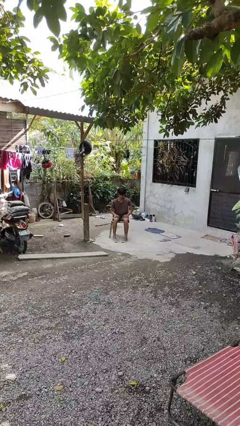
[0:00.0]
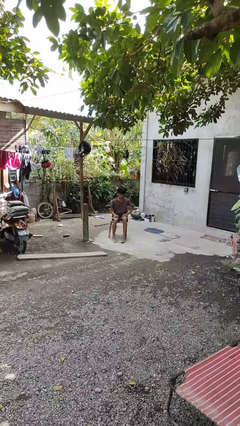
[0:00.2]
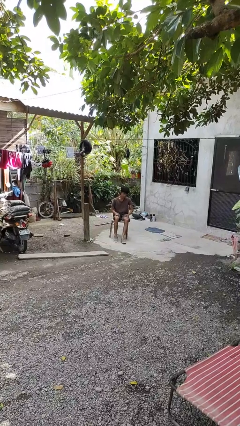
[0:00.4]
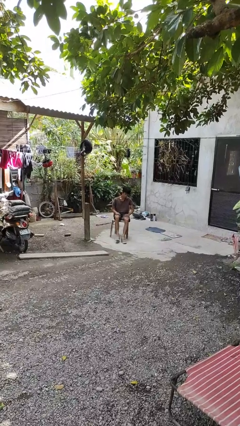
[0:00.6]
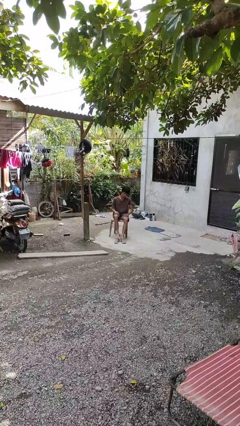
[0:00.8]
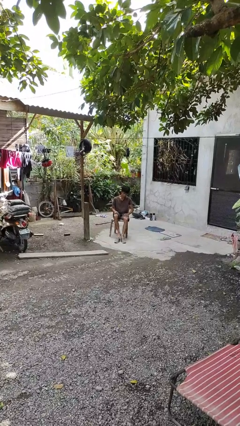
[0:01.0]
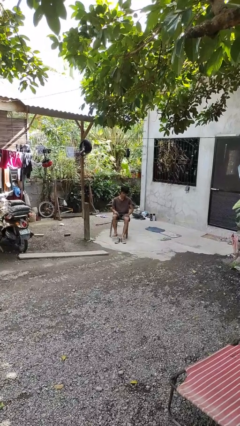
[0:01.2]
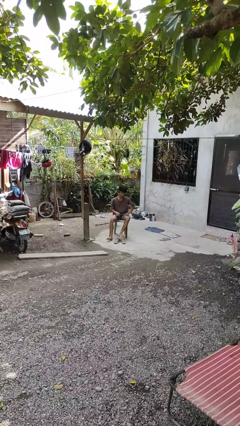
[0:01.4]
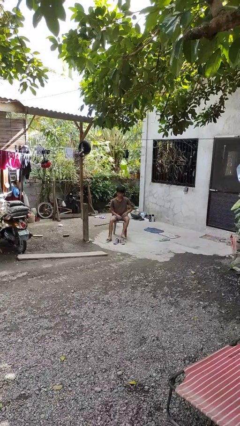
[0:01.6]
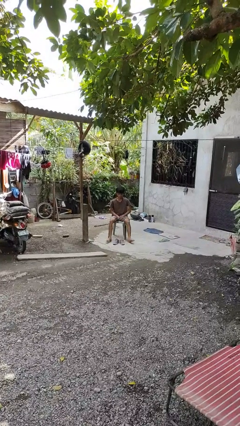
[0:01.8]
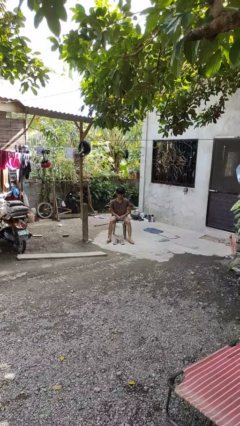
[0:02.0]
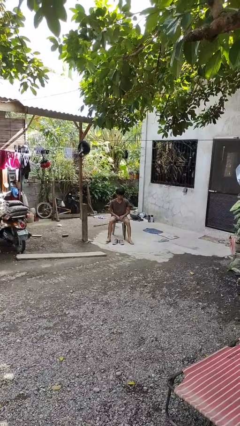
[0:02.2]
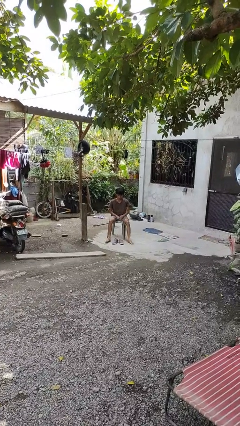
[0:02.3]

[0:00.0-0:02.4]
person takes off shoes

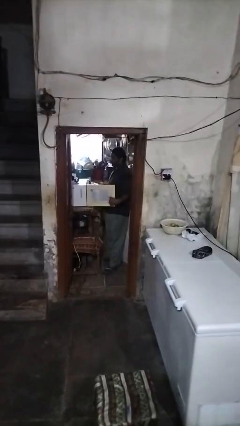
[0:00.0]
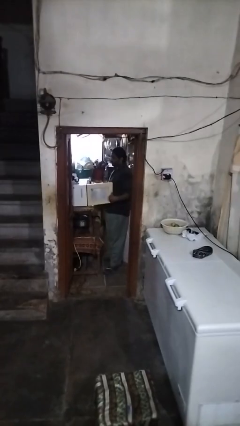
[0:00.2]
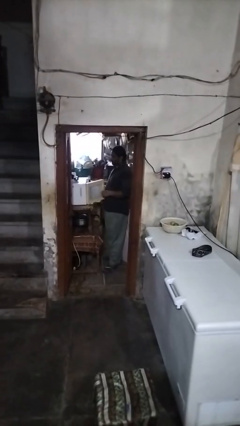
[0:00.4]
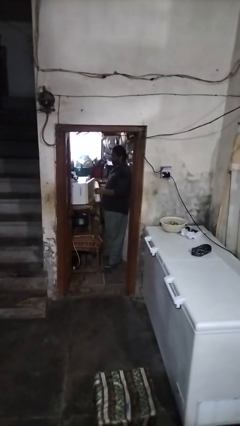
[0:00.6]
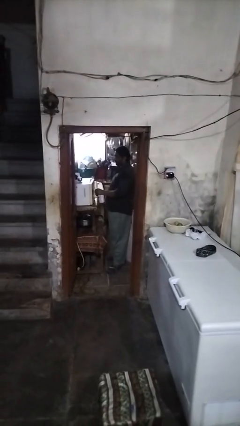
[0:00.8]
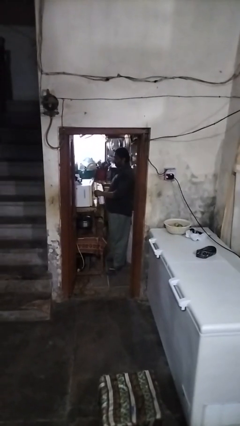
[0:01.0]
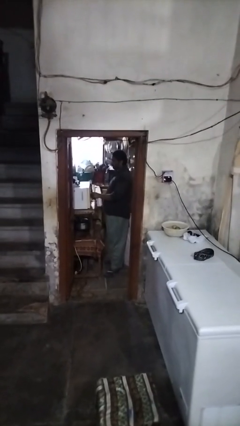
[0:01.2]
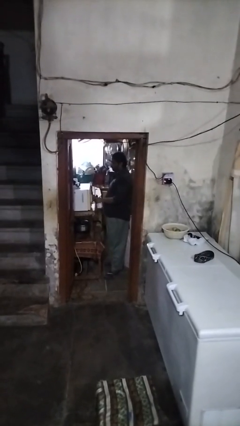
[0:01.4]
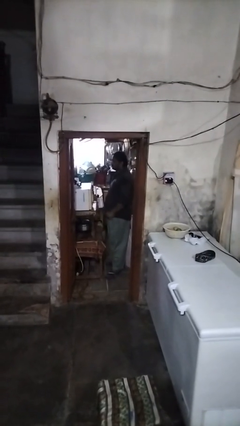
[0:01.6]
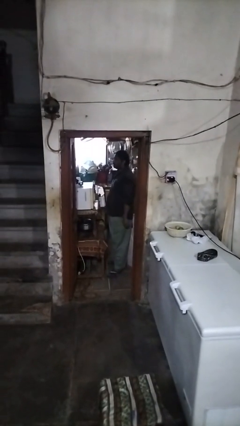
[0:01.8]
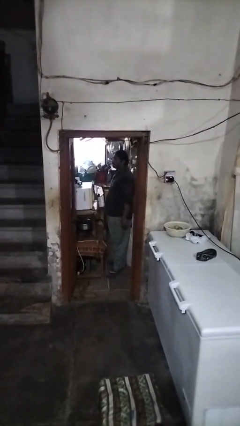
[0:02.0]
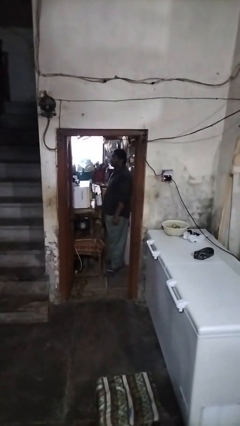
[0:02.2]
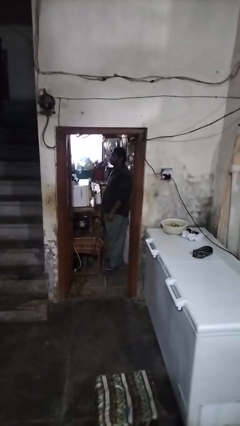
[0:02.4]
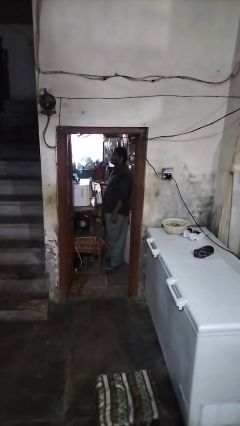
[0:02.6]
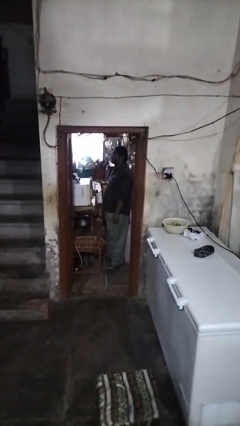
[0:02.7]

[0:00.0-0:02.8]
person closes oven door

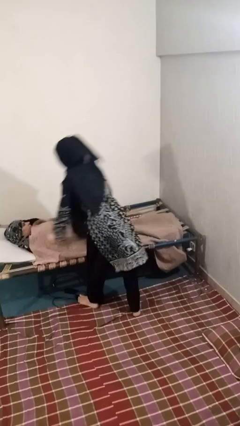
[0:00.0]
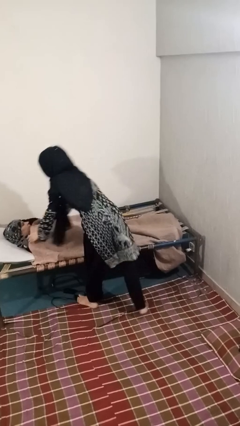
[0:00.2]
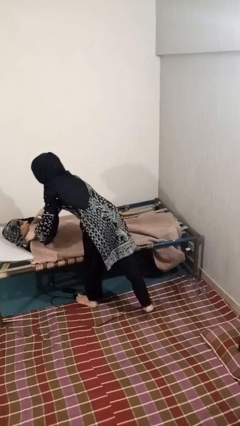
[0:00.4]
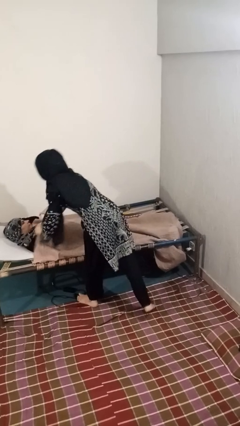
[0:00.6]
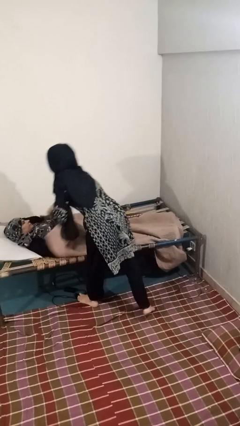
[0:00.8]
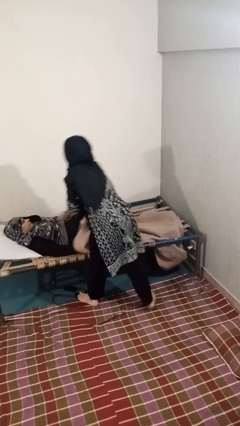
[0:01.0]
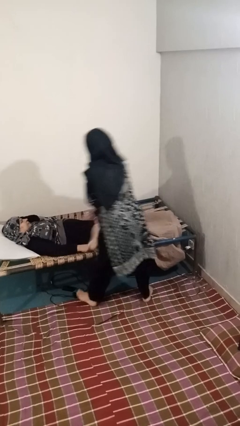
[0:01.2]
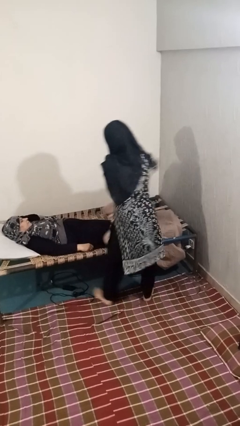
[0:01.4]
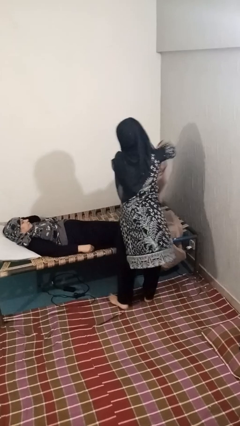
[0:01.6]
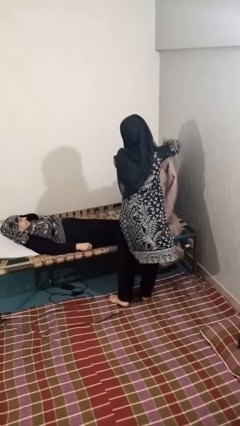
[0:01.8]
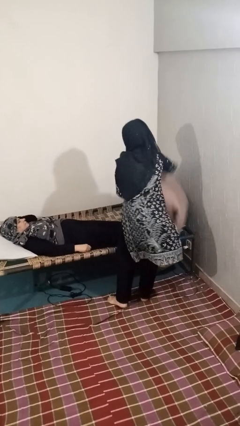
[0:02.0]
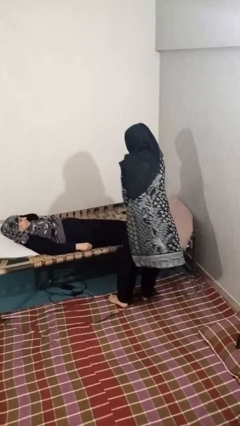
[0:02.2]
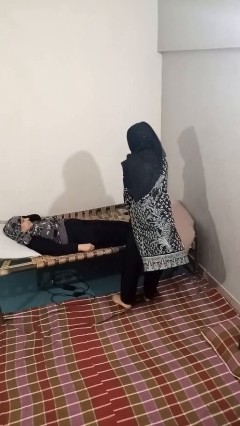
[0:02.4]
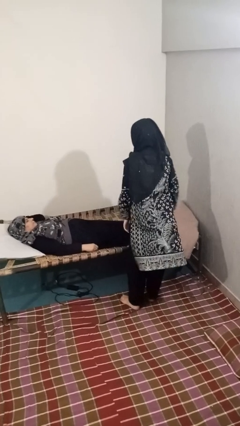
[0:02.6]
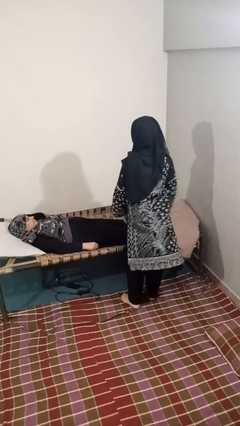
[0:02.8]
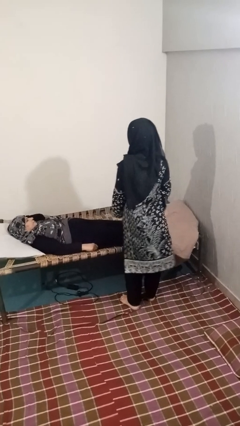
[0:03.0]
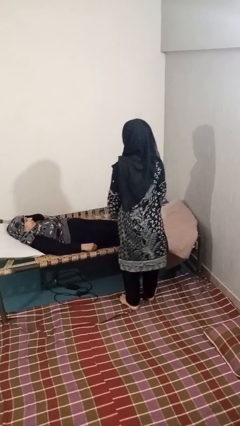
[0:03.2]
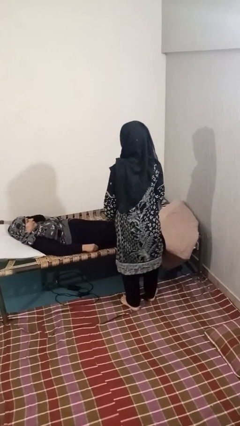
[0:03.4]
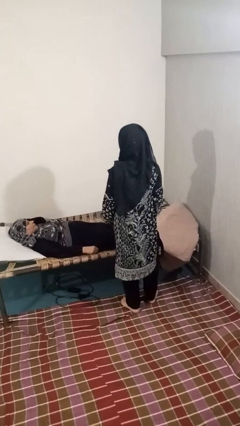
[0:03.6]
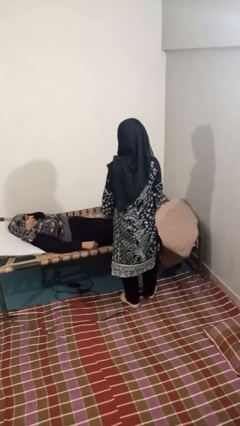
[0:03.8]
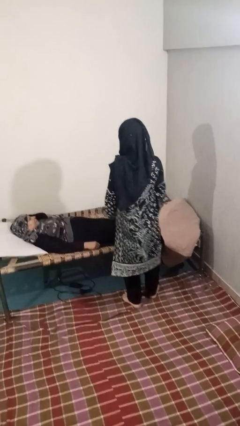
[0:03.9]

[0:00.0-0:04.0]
person uncovers friend with blanket

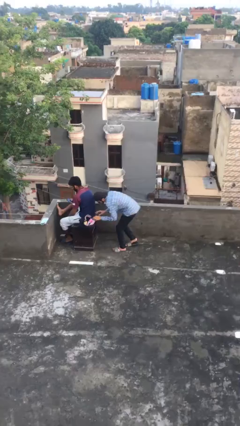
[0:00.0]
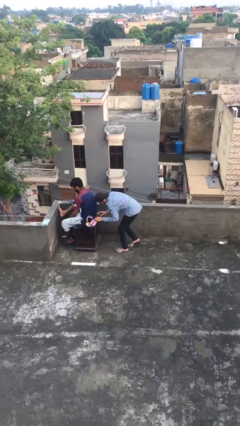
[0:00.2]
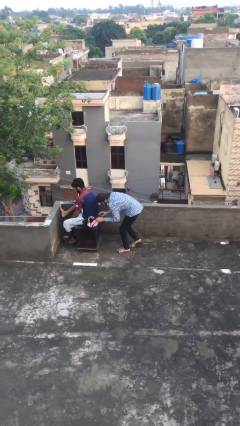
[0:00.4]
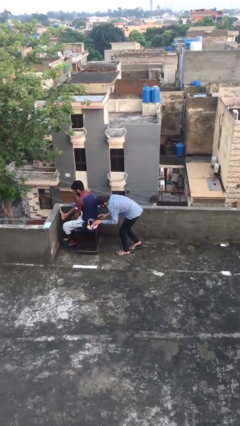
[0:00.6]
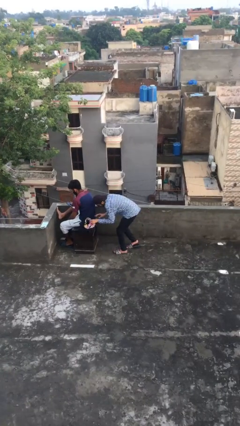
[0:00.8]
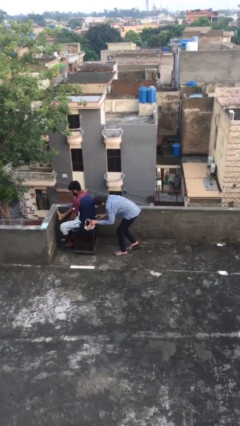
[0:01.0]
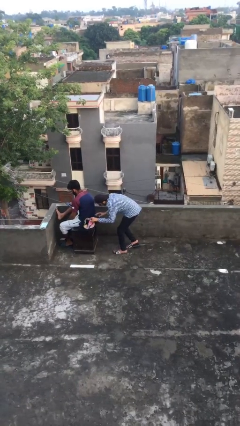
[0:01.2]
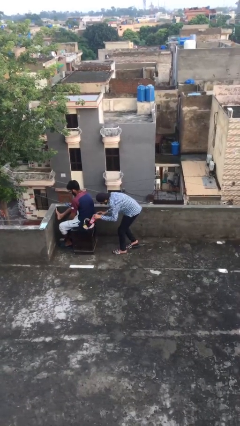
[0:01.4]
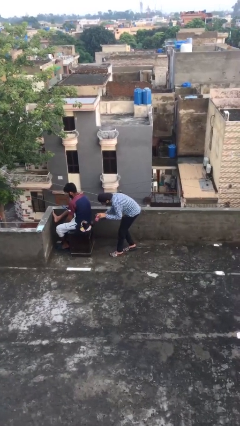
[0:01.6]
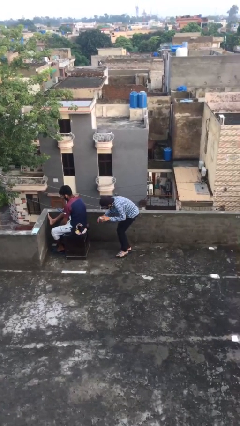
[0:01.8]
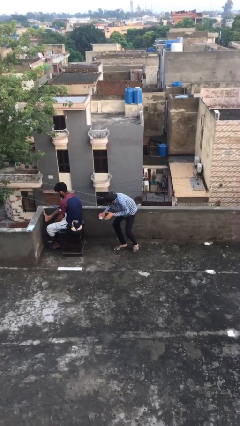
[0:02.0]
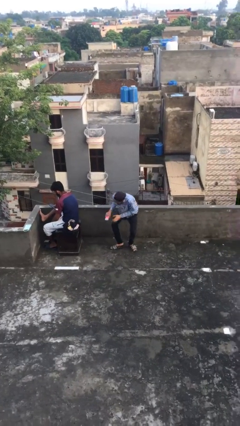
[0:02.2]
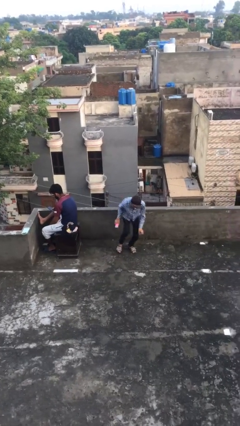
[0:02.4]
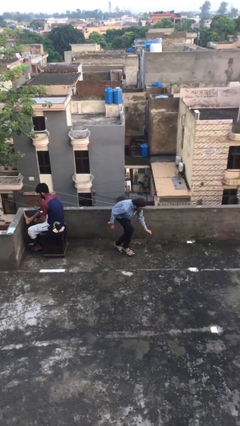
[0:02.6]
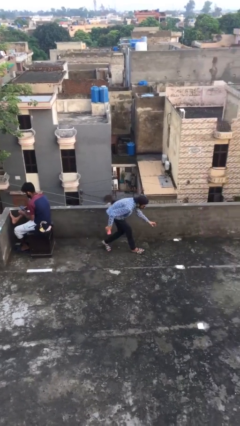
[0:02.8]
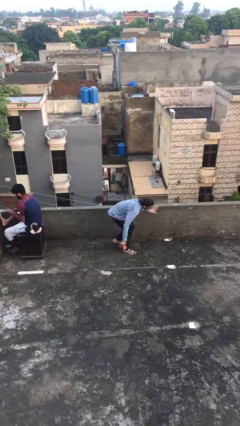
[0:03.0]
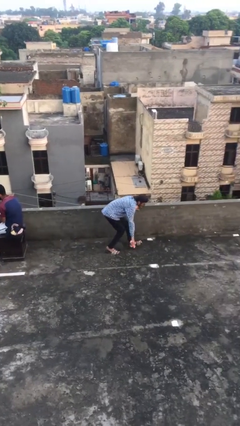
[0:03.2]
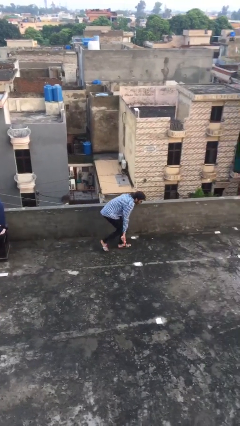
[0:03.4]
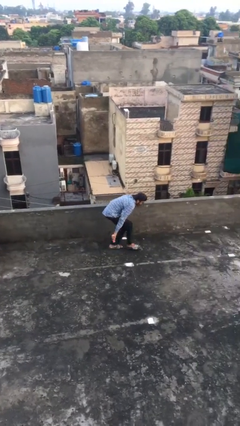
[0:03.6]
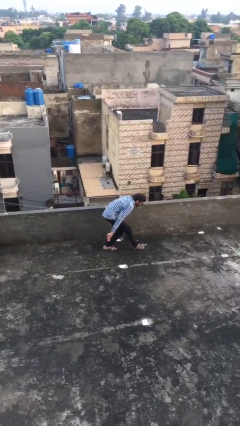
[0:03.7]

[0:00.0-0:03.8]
person steals object from person

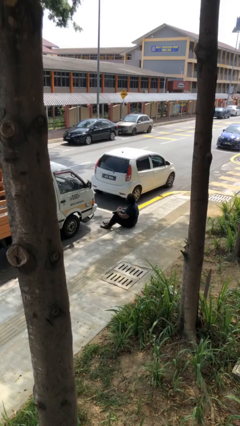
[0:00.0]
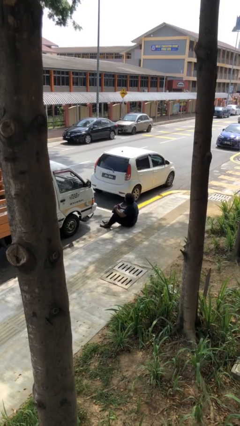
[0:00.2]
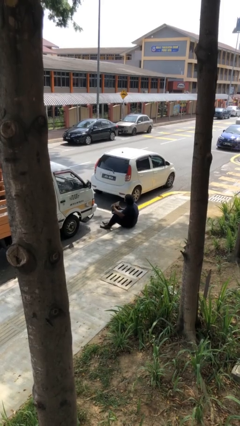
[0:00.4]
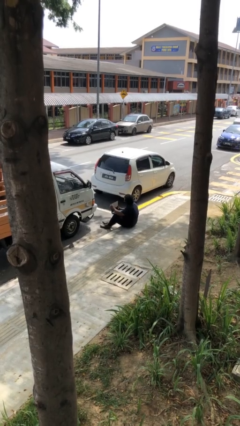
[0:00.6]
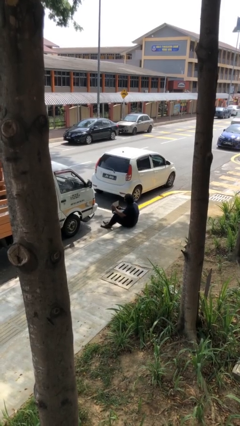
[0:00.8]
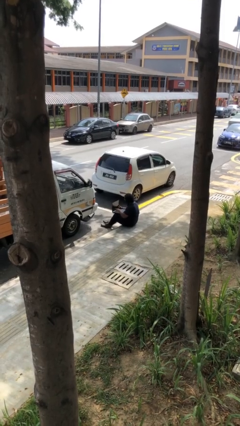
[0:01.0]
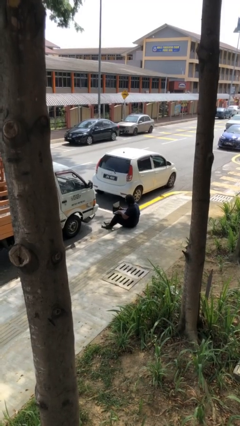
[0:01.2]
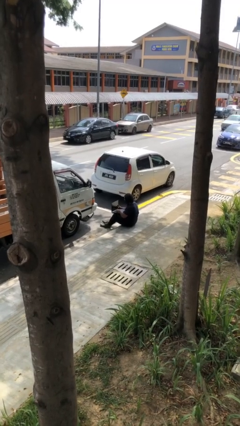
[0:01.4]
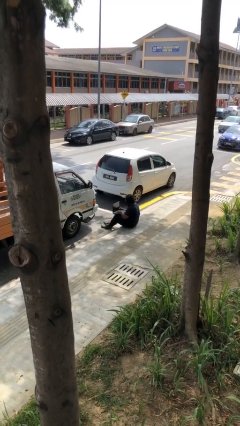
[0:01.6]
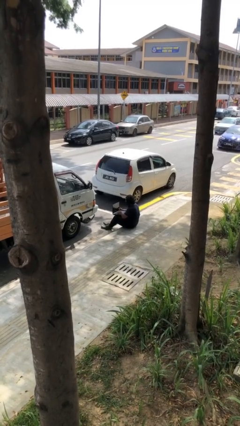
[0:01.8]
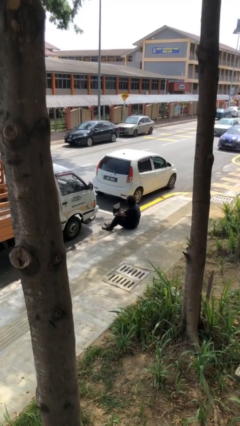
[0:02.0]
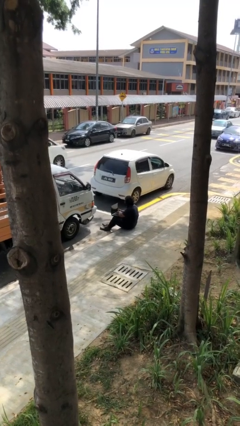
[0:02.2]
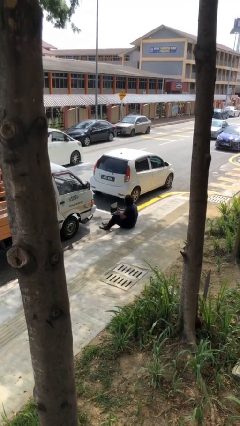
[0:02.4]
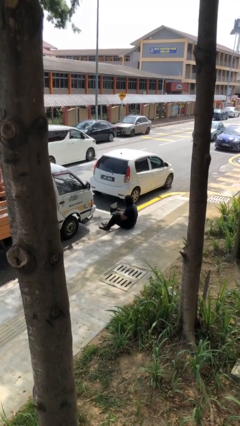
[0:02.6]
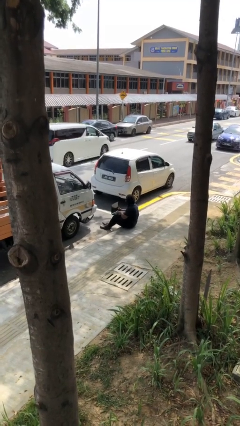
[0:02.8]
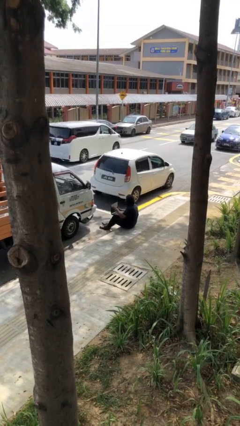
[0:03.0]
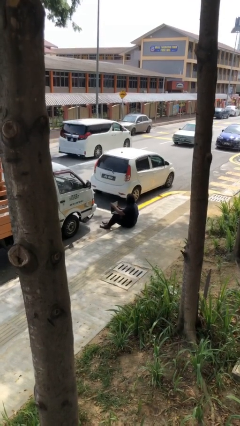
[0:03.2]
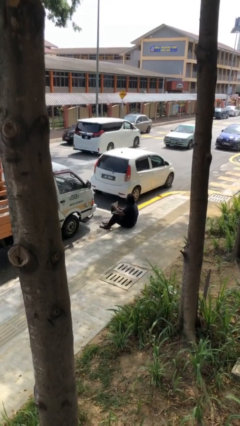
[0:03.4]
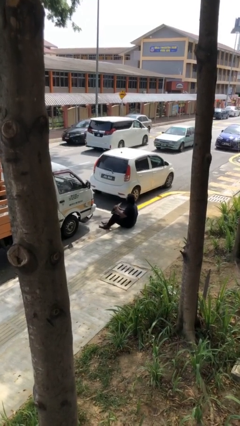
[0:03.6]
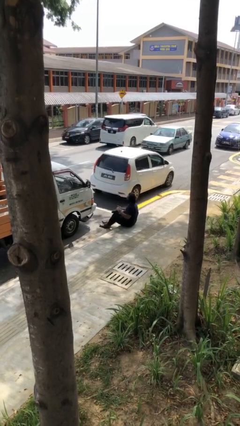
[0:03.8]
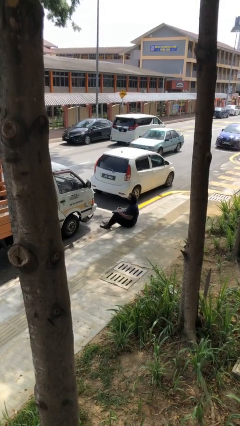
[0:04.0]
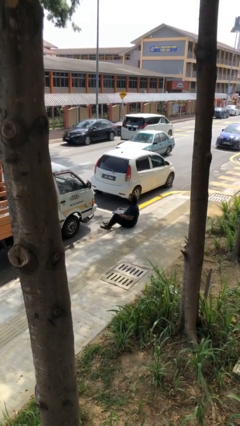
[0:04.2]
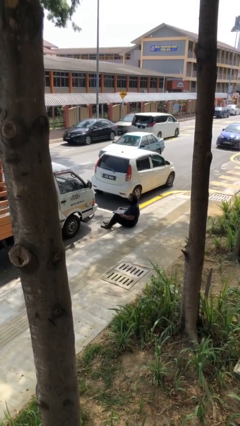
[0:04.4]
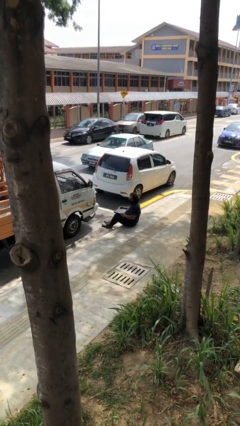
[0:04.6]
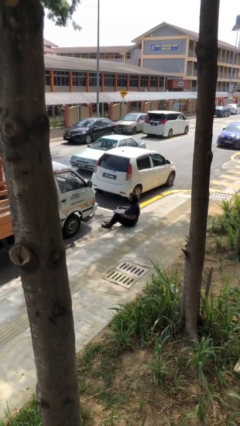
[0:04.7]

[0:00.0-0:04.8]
person interacts with laptop
